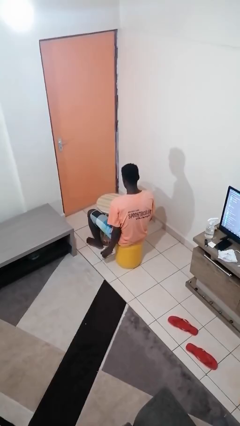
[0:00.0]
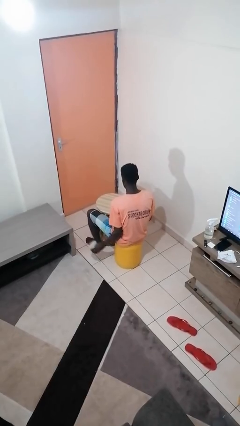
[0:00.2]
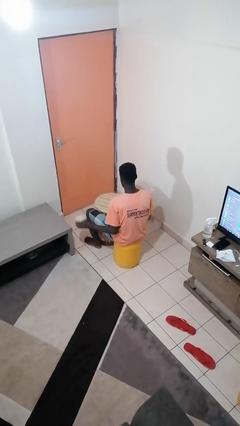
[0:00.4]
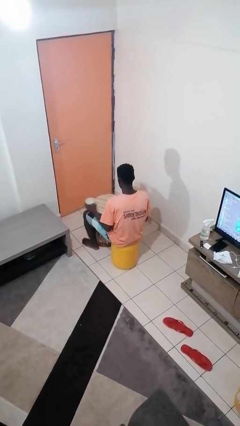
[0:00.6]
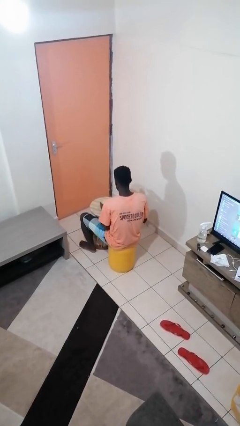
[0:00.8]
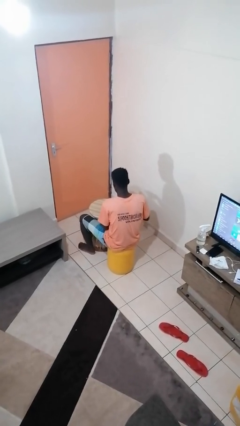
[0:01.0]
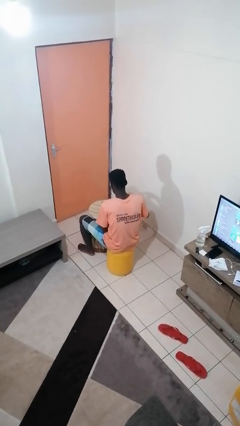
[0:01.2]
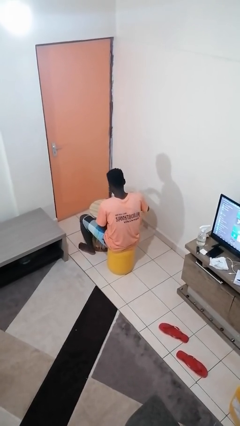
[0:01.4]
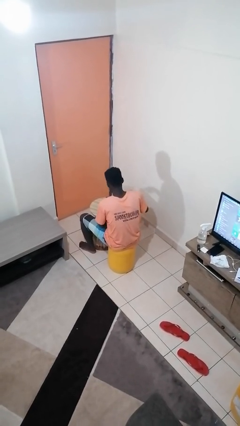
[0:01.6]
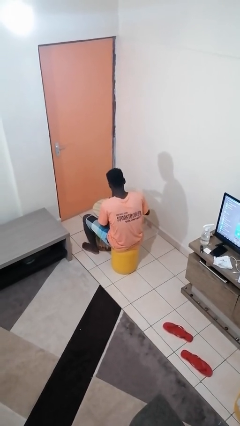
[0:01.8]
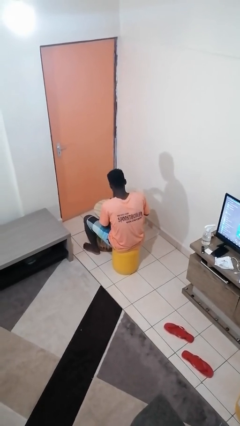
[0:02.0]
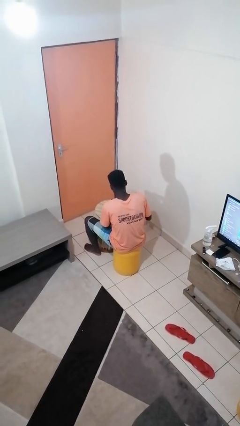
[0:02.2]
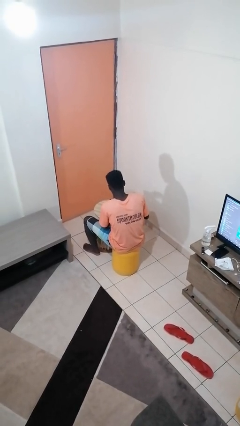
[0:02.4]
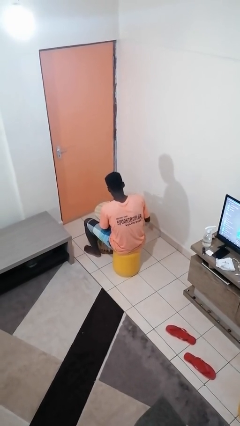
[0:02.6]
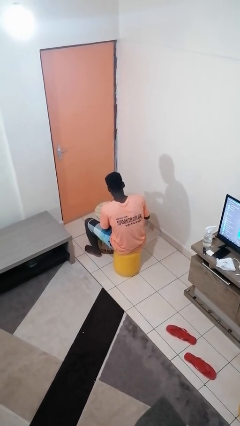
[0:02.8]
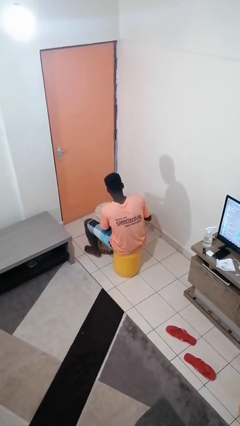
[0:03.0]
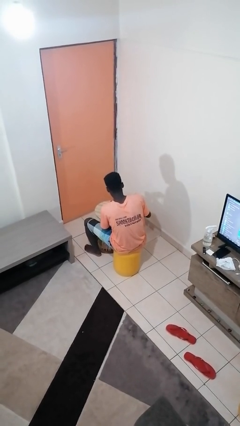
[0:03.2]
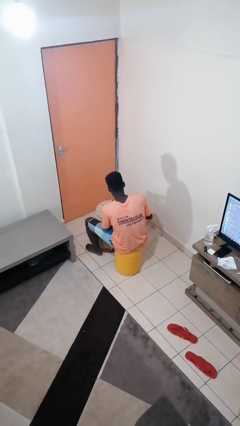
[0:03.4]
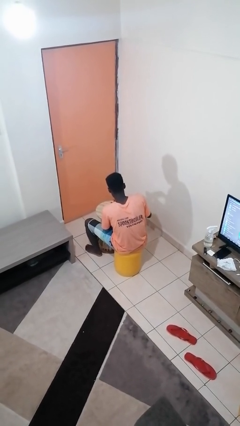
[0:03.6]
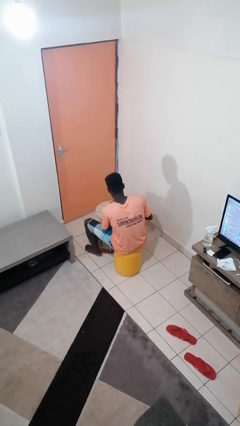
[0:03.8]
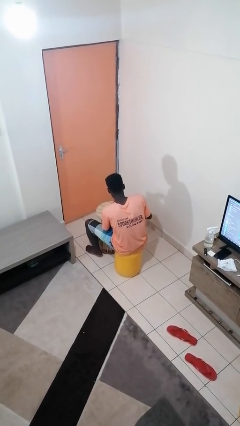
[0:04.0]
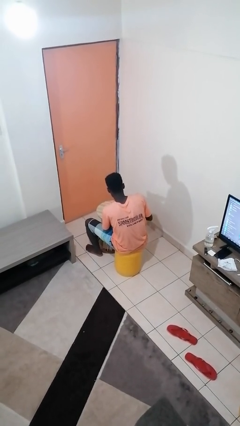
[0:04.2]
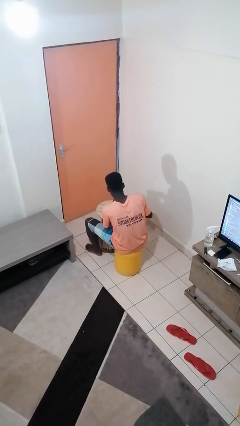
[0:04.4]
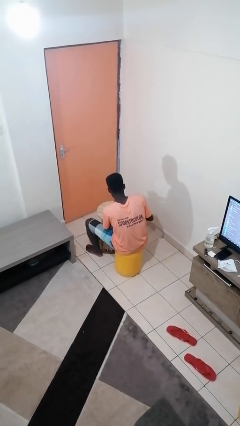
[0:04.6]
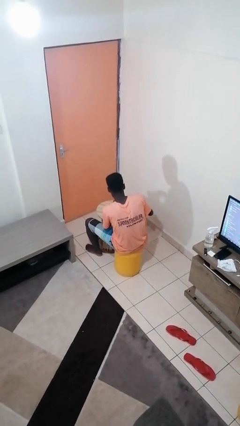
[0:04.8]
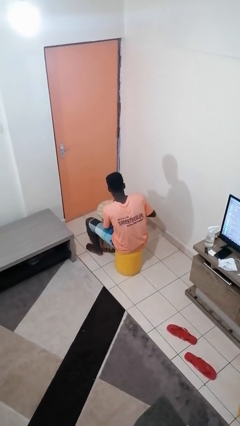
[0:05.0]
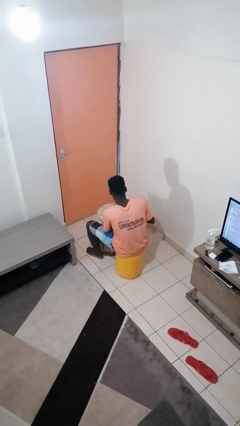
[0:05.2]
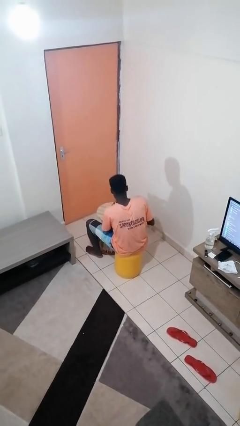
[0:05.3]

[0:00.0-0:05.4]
person opens can with can opener

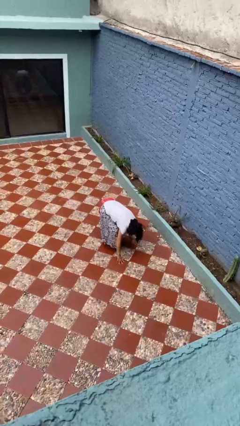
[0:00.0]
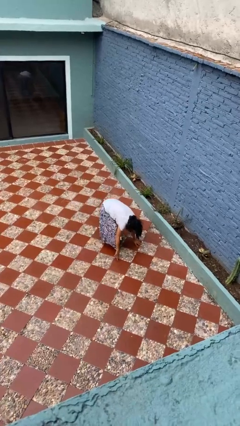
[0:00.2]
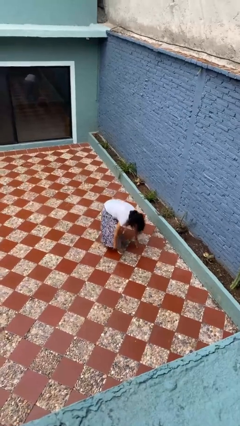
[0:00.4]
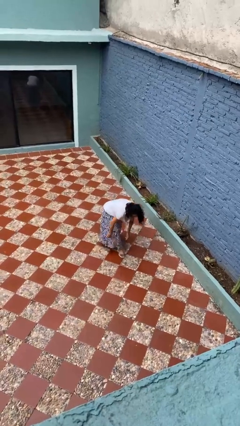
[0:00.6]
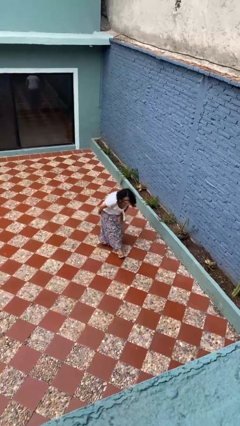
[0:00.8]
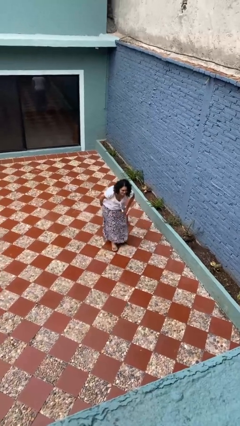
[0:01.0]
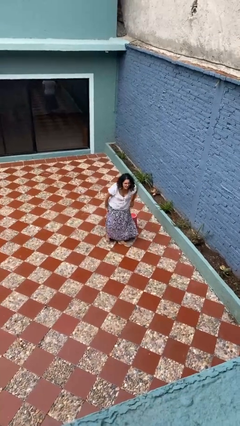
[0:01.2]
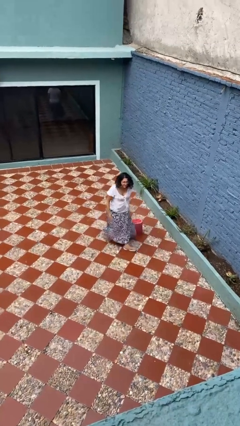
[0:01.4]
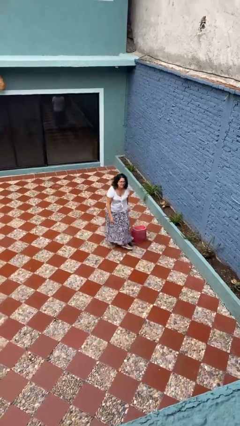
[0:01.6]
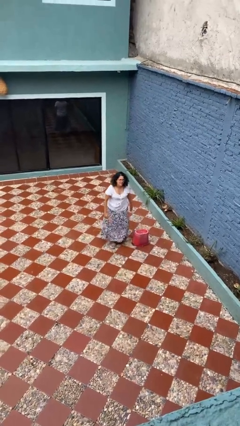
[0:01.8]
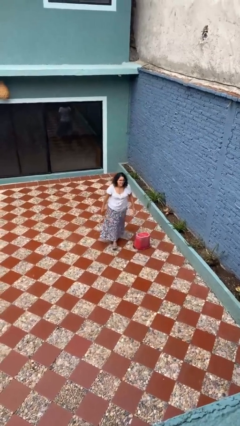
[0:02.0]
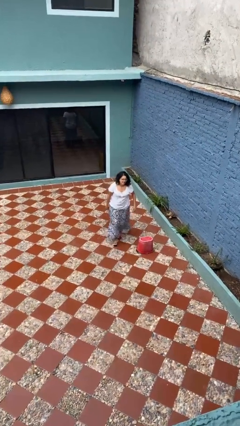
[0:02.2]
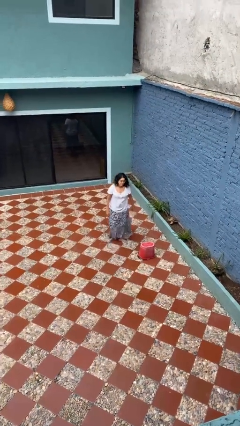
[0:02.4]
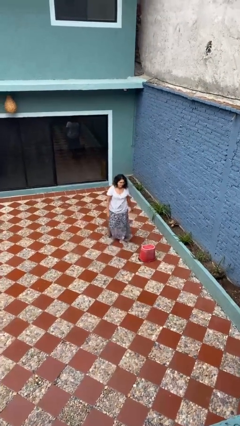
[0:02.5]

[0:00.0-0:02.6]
person stands up from floor

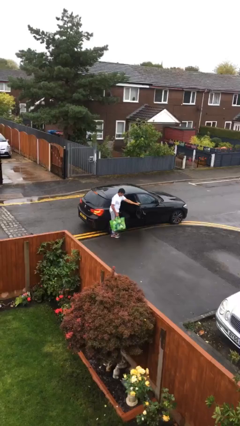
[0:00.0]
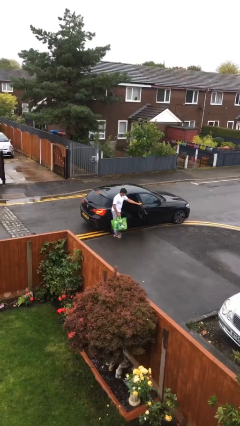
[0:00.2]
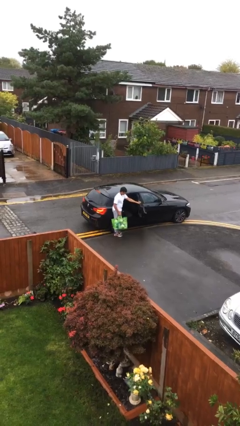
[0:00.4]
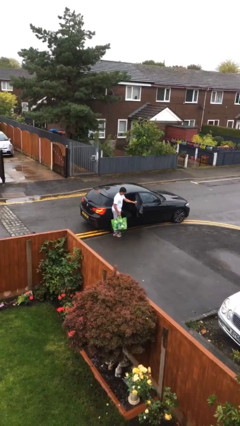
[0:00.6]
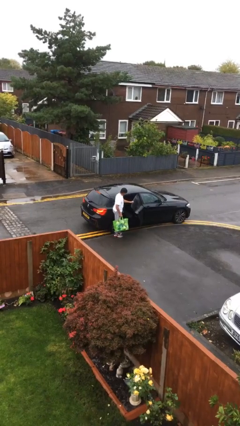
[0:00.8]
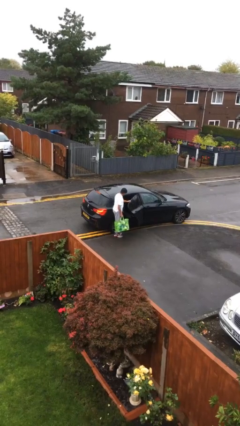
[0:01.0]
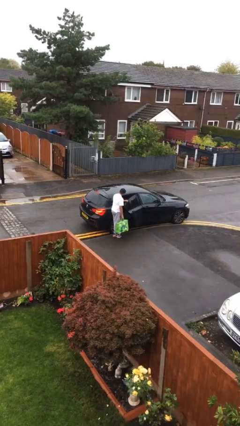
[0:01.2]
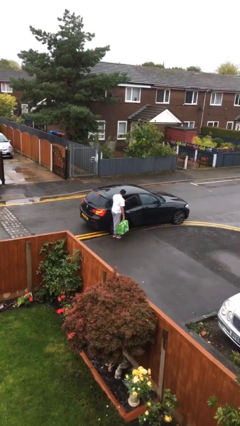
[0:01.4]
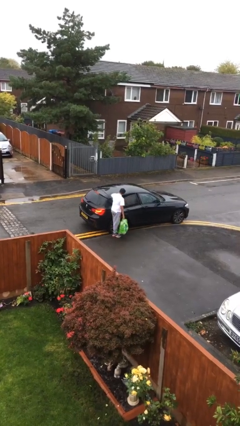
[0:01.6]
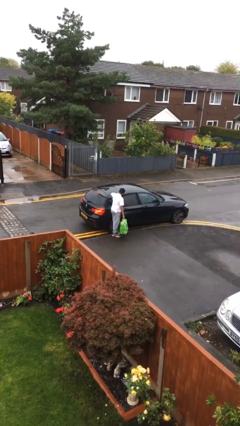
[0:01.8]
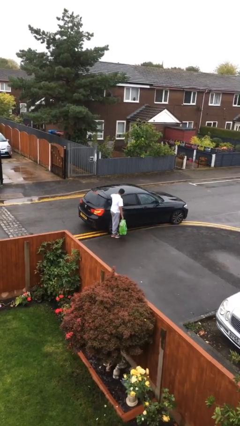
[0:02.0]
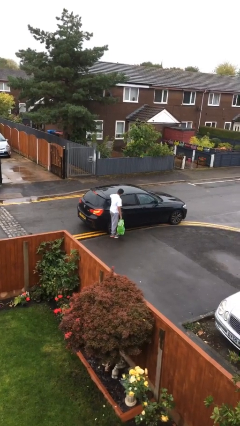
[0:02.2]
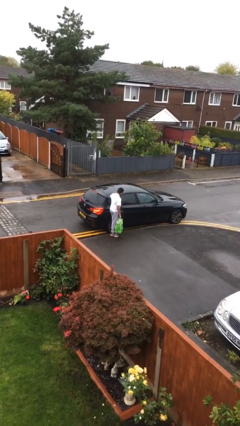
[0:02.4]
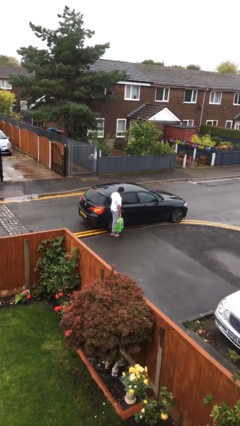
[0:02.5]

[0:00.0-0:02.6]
person closes car door

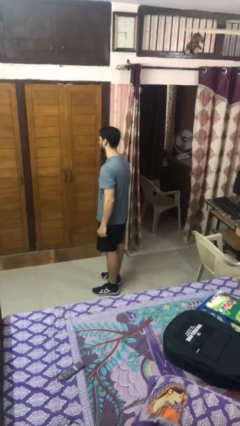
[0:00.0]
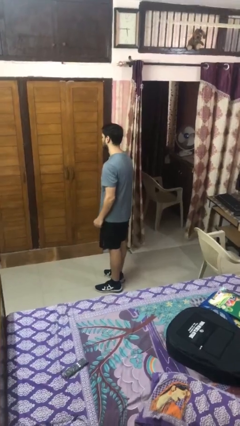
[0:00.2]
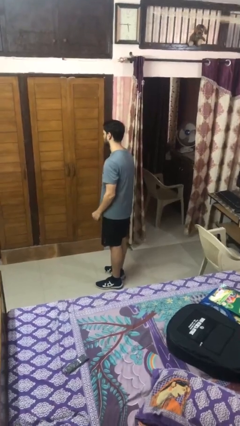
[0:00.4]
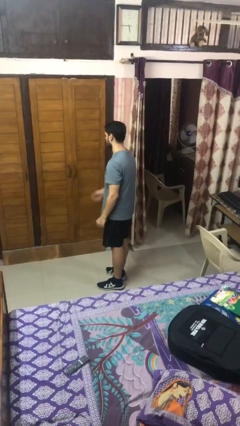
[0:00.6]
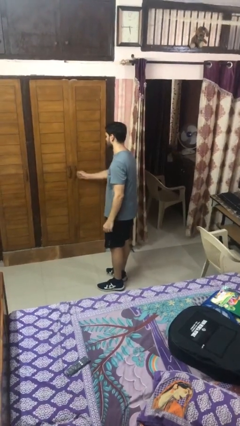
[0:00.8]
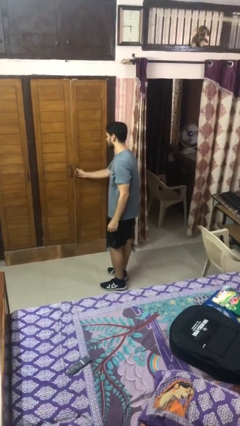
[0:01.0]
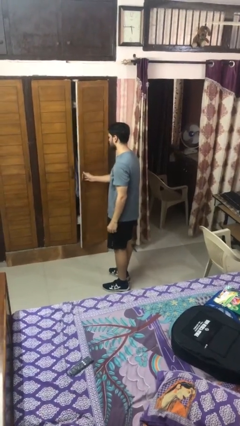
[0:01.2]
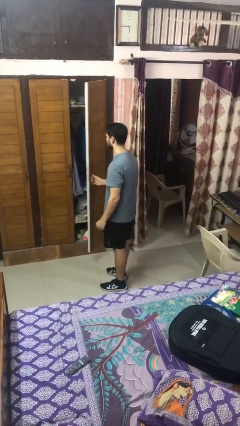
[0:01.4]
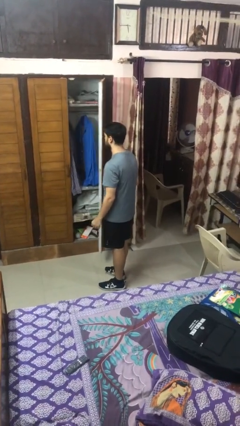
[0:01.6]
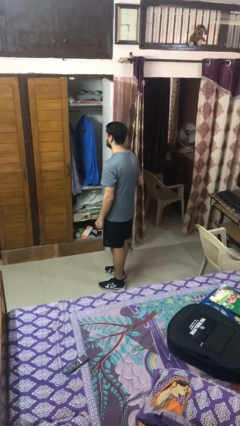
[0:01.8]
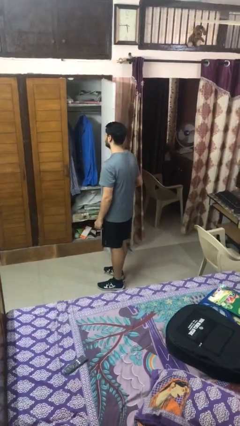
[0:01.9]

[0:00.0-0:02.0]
person opens closet door

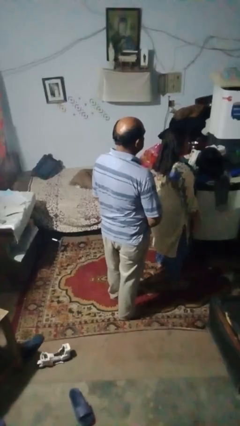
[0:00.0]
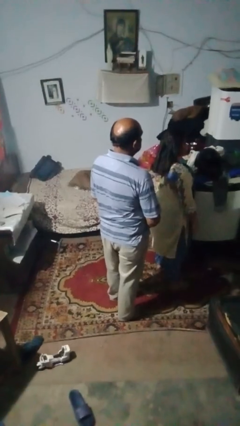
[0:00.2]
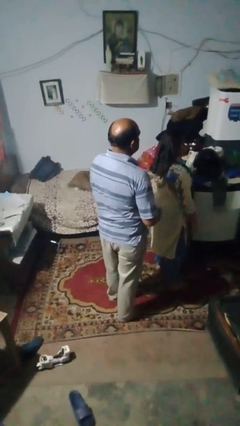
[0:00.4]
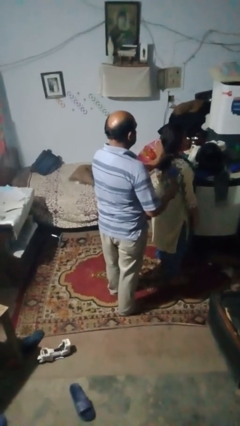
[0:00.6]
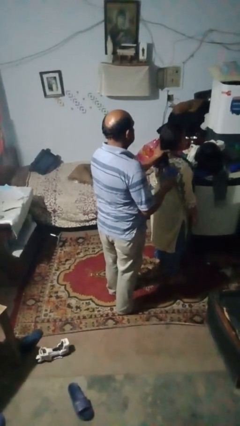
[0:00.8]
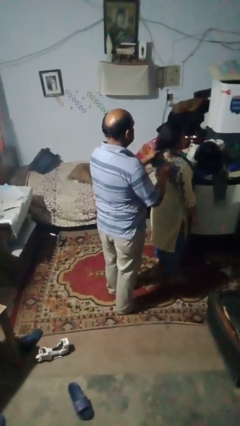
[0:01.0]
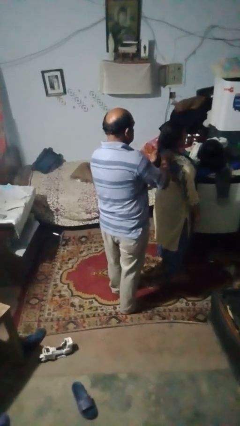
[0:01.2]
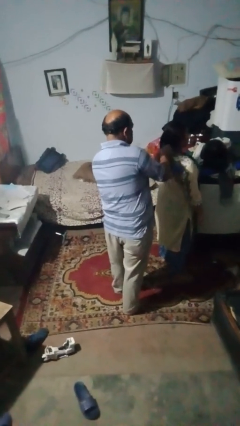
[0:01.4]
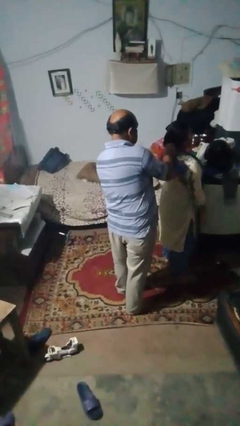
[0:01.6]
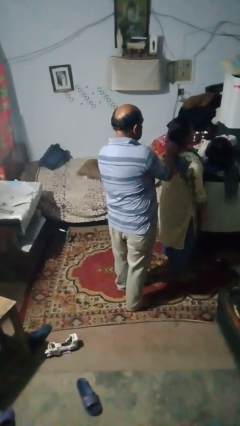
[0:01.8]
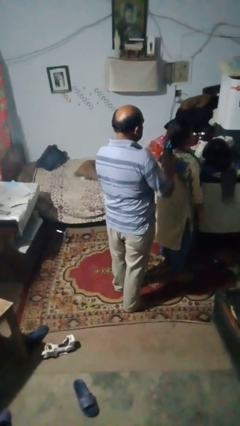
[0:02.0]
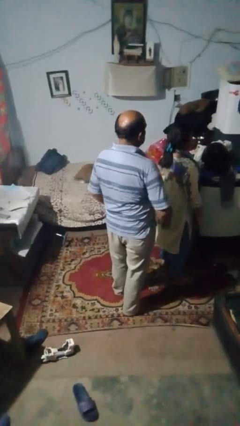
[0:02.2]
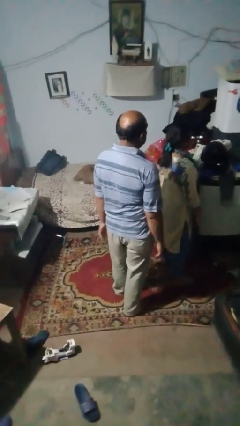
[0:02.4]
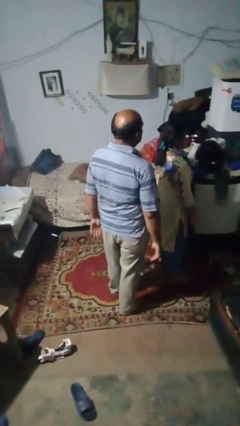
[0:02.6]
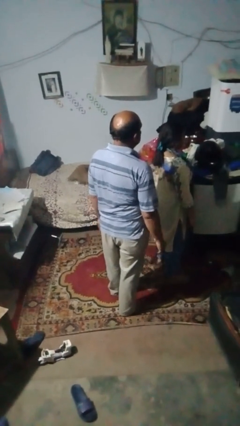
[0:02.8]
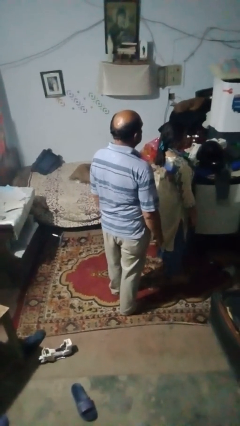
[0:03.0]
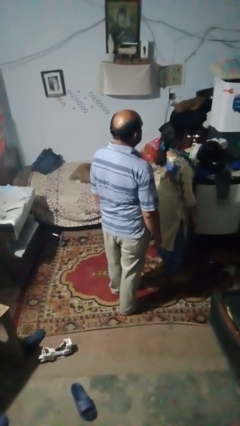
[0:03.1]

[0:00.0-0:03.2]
person braids hair of person

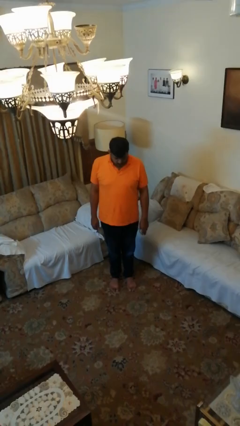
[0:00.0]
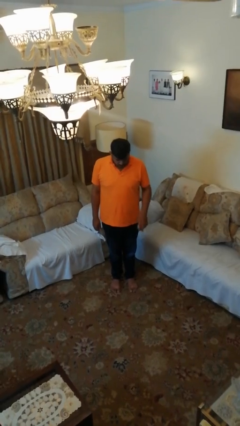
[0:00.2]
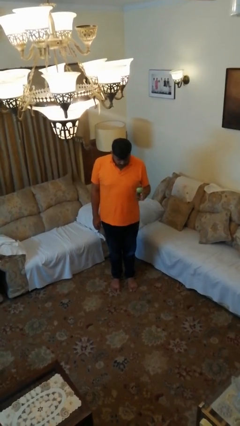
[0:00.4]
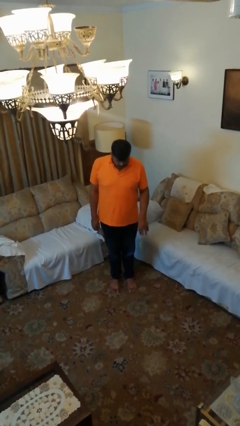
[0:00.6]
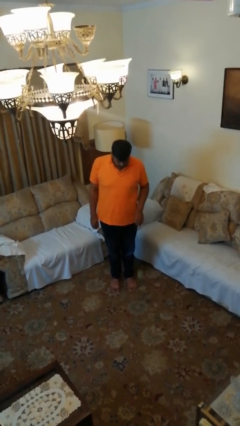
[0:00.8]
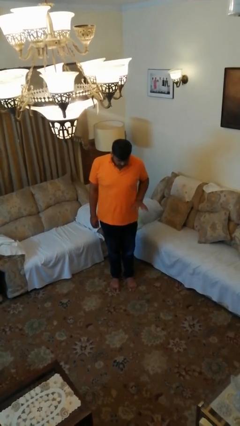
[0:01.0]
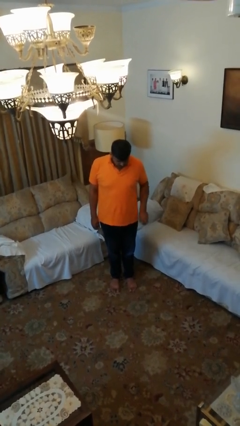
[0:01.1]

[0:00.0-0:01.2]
person bounces ball on floor
